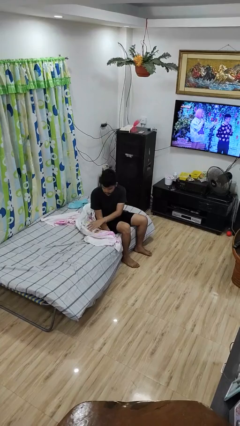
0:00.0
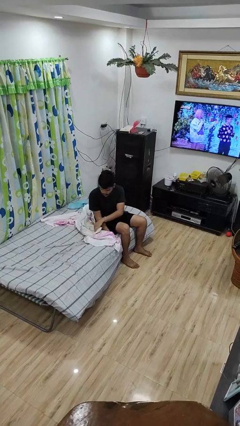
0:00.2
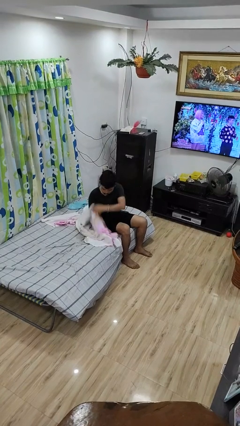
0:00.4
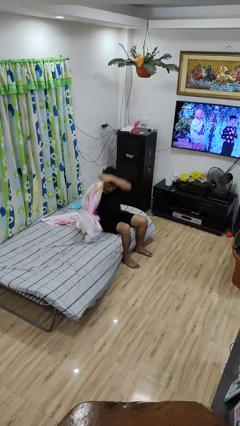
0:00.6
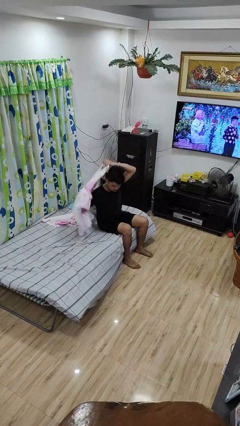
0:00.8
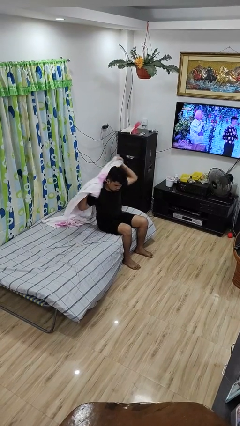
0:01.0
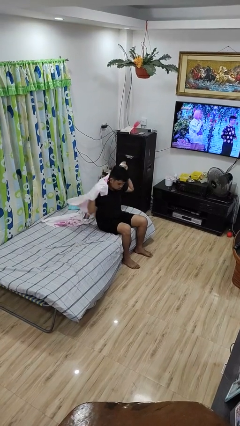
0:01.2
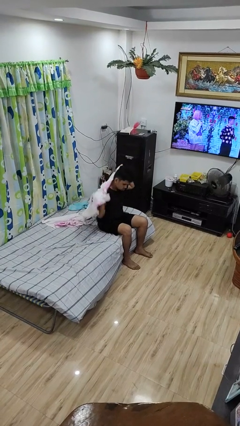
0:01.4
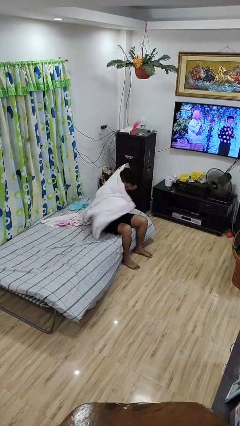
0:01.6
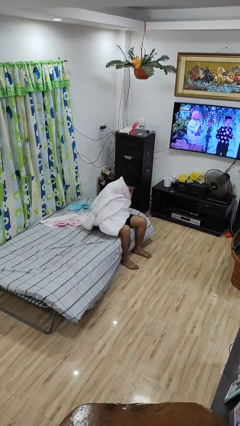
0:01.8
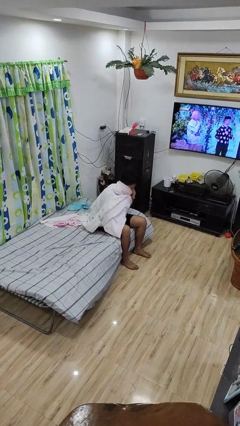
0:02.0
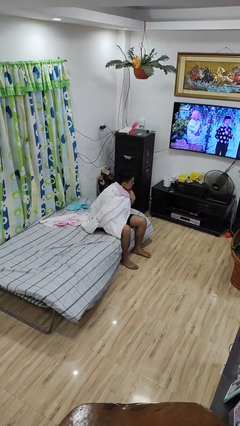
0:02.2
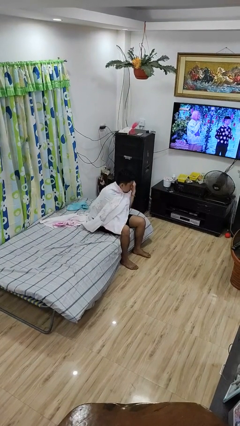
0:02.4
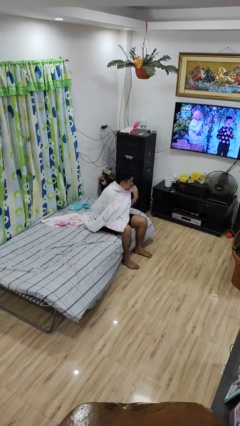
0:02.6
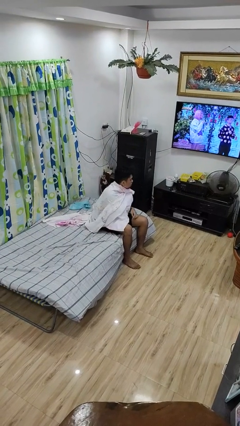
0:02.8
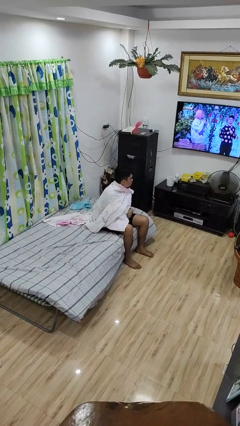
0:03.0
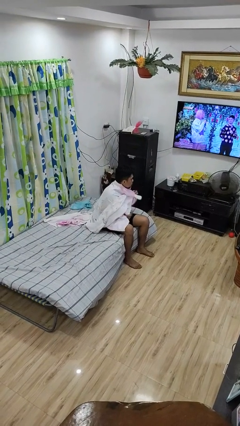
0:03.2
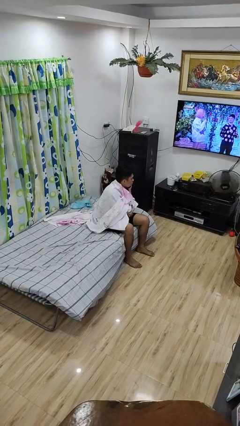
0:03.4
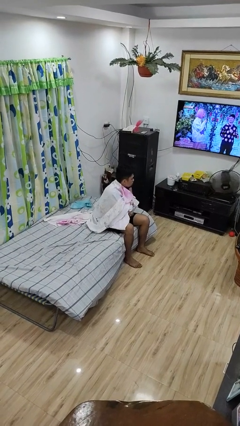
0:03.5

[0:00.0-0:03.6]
person covers with blanket

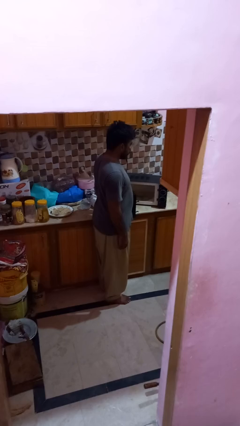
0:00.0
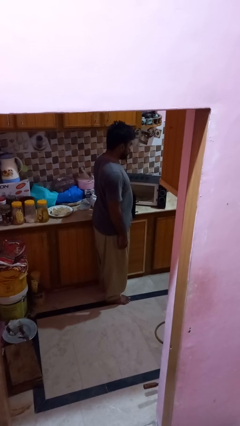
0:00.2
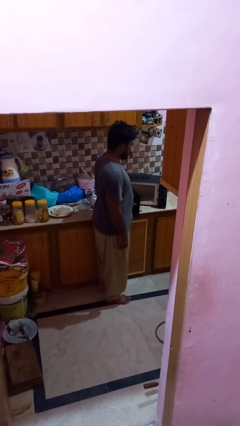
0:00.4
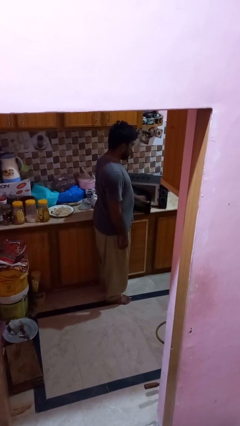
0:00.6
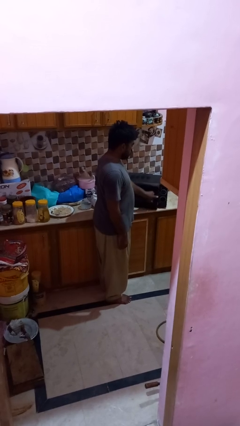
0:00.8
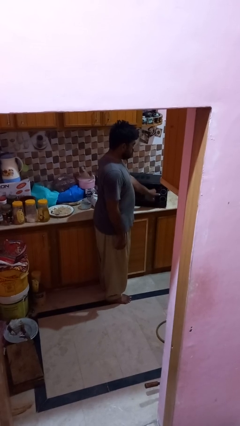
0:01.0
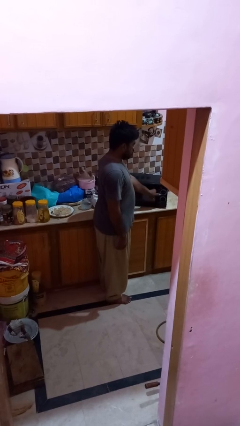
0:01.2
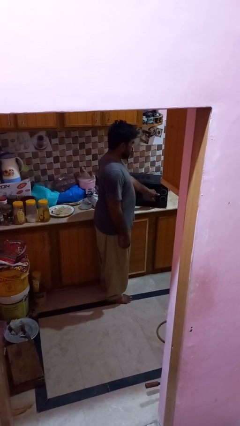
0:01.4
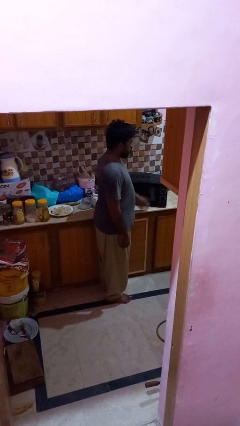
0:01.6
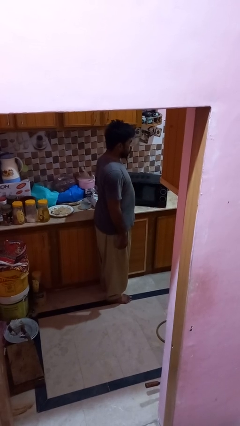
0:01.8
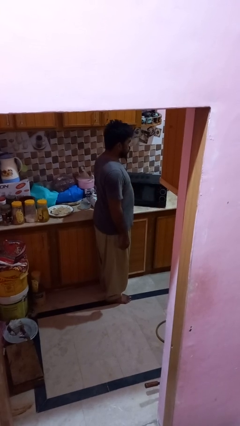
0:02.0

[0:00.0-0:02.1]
person closes microwave

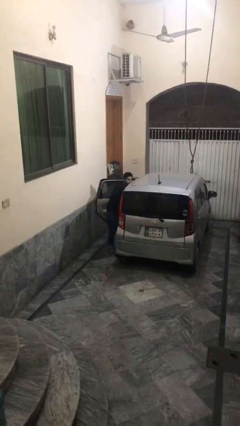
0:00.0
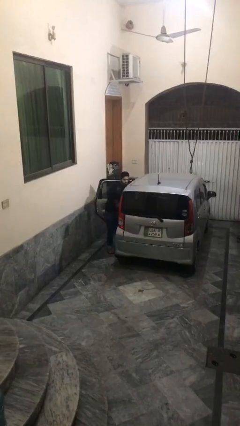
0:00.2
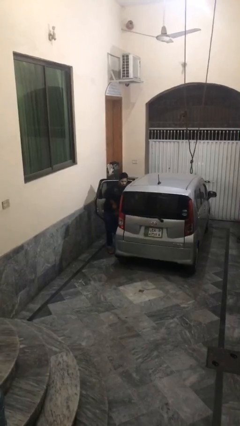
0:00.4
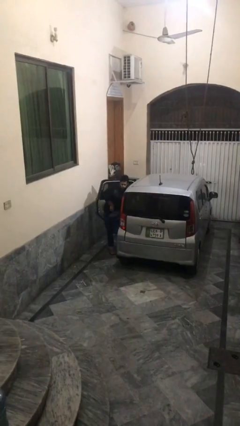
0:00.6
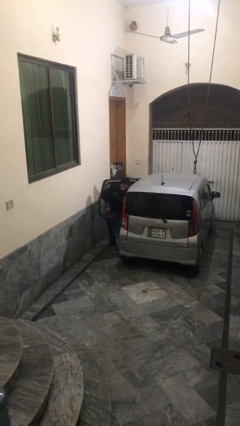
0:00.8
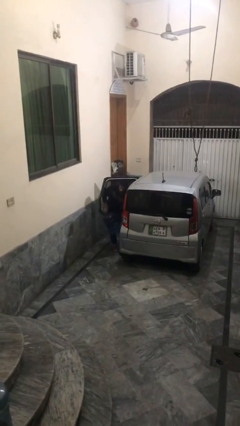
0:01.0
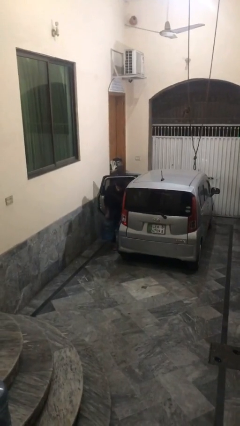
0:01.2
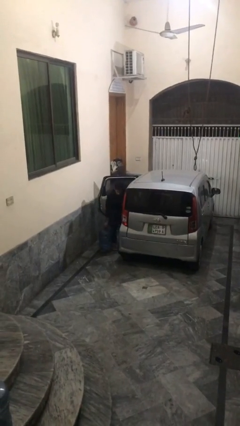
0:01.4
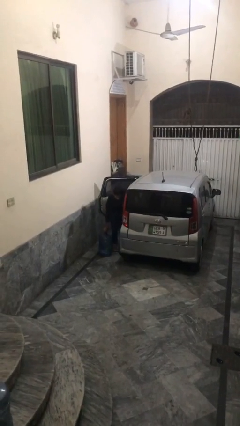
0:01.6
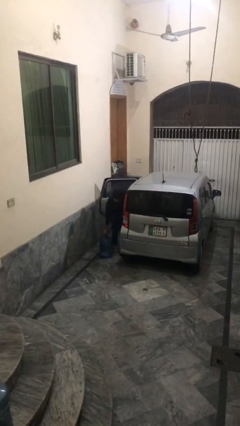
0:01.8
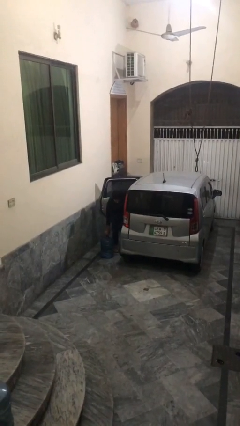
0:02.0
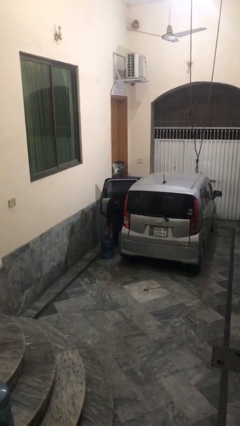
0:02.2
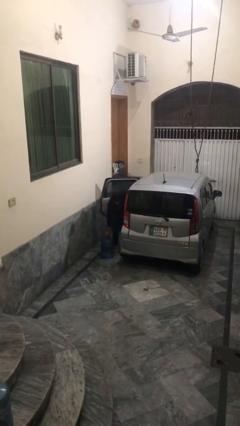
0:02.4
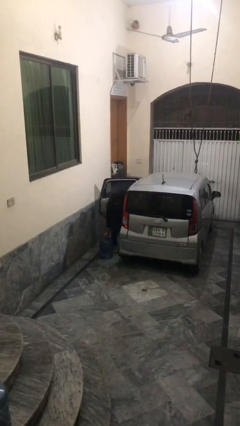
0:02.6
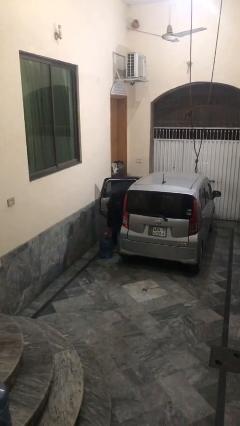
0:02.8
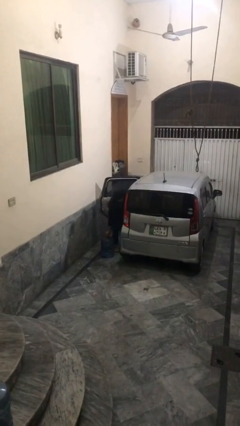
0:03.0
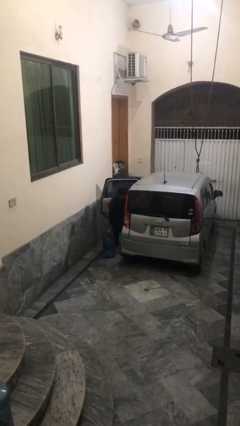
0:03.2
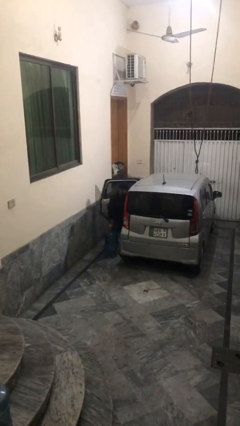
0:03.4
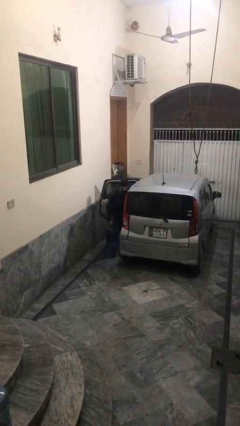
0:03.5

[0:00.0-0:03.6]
person unloads car

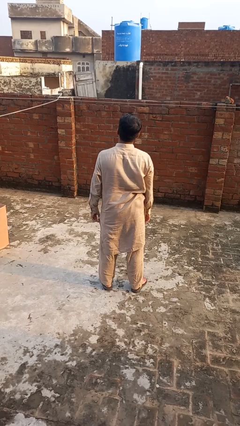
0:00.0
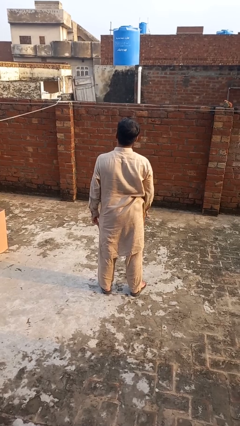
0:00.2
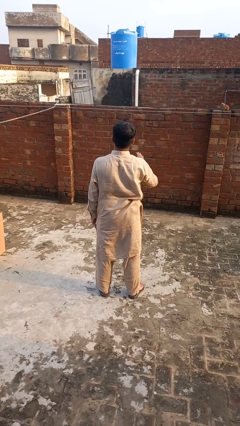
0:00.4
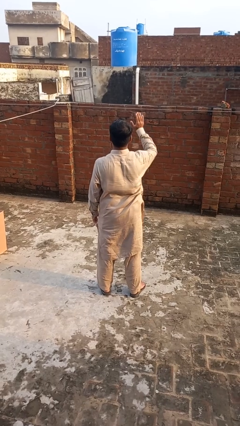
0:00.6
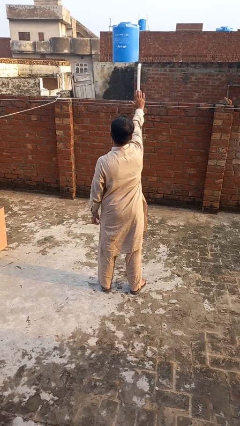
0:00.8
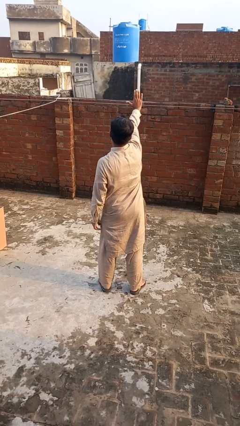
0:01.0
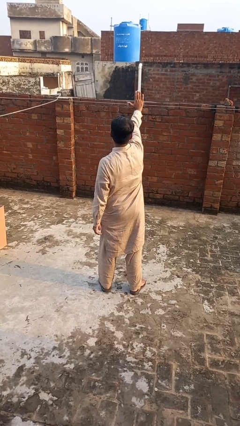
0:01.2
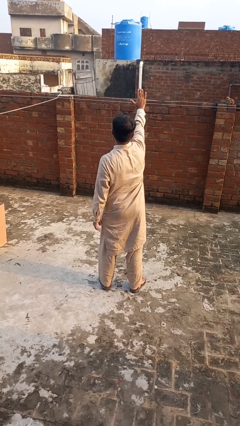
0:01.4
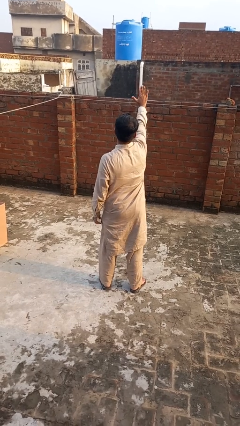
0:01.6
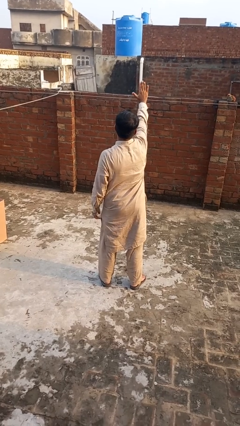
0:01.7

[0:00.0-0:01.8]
person gestures stop

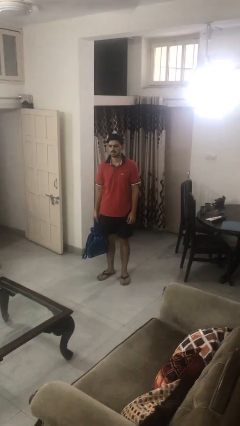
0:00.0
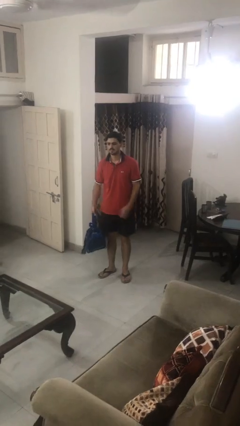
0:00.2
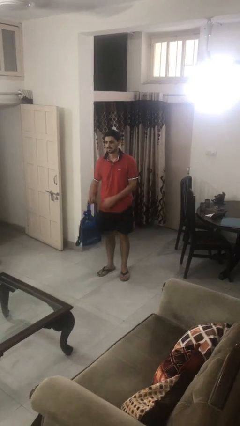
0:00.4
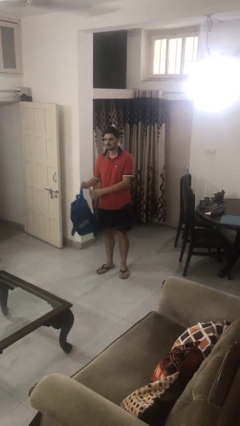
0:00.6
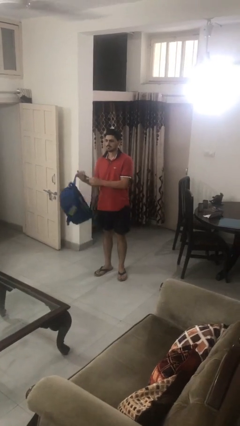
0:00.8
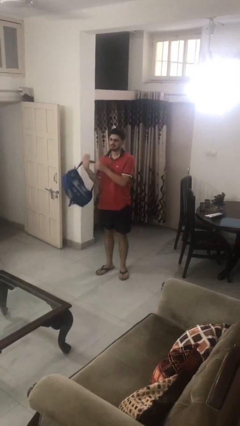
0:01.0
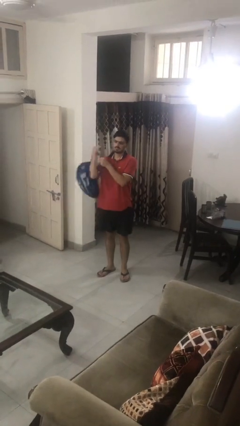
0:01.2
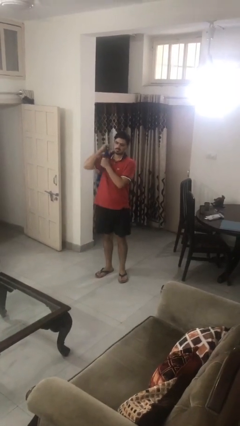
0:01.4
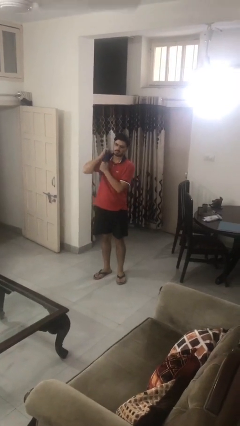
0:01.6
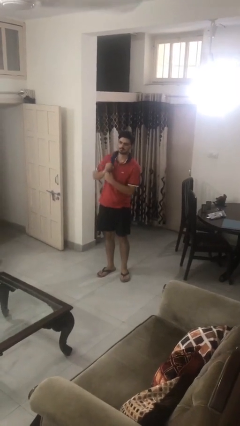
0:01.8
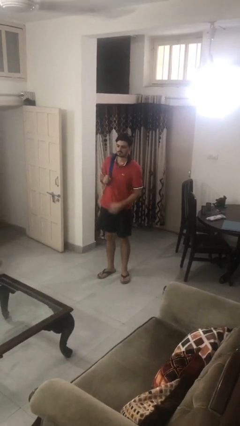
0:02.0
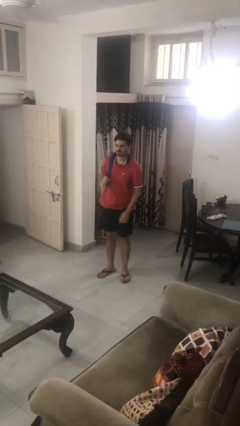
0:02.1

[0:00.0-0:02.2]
person puts on backpack

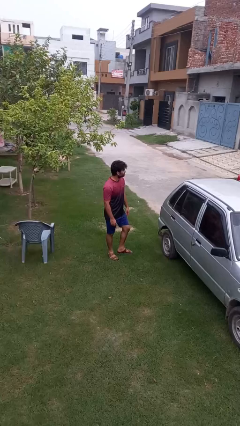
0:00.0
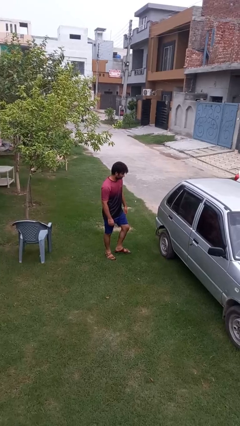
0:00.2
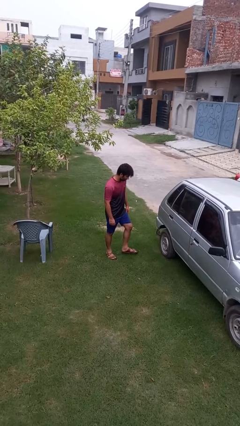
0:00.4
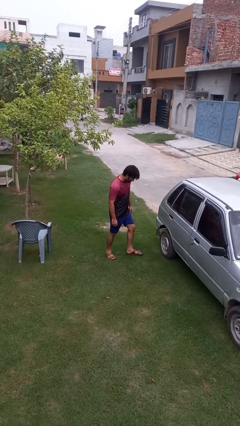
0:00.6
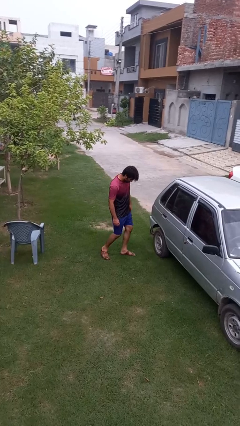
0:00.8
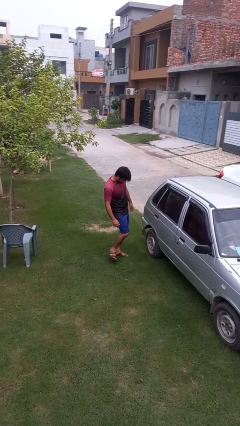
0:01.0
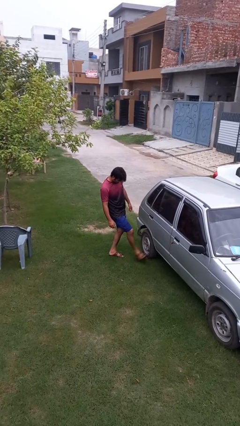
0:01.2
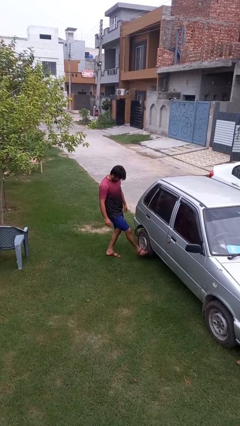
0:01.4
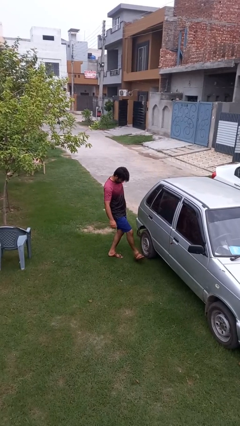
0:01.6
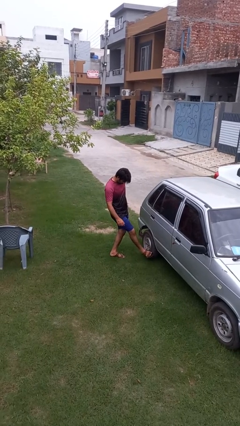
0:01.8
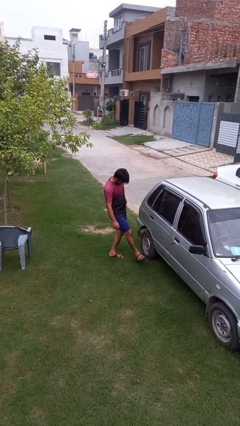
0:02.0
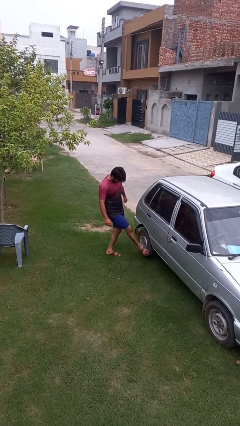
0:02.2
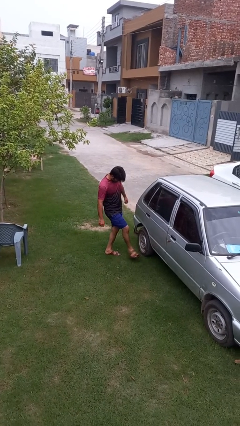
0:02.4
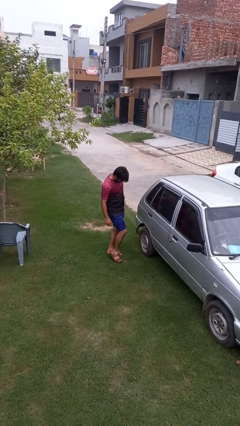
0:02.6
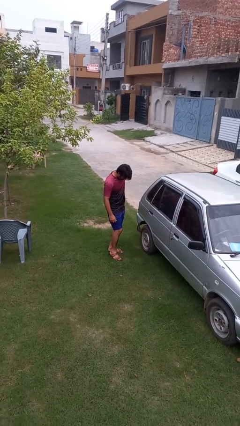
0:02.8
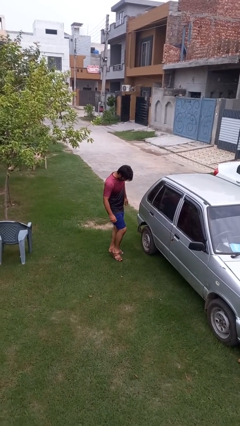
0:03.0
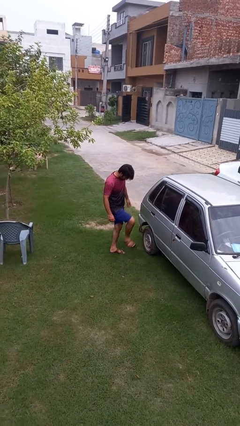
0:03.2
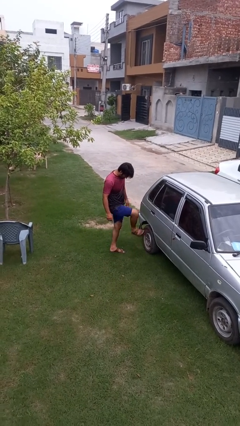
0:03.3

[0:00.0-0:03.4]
person kicks car tires

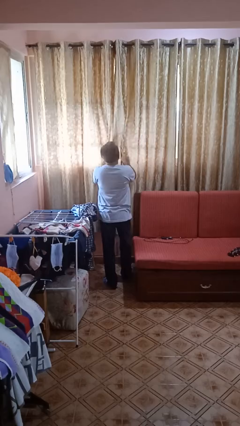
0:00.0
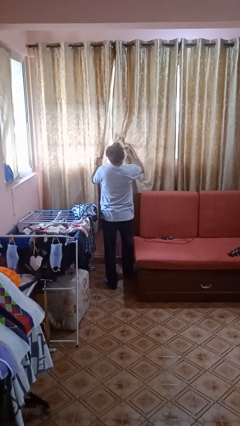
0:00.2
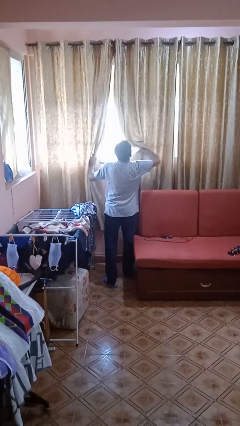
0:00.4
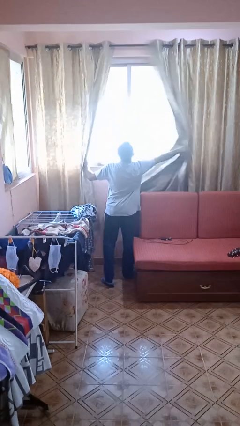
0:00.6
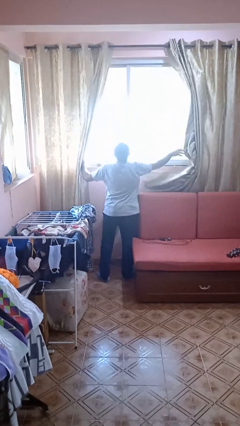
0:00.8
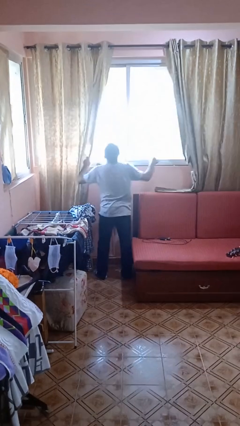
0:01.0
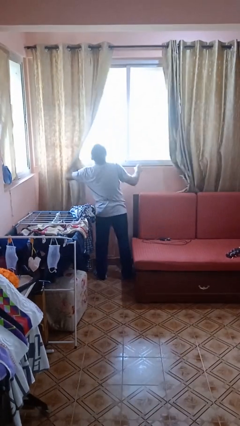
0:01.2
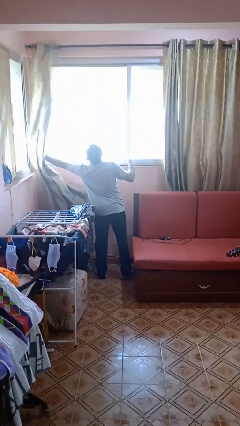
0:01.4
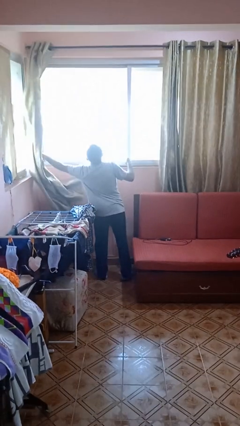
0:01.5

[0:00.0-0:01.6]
person opens curtains
